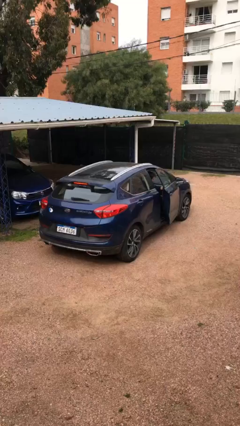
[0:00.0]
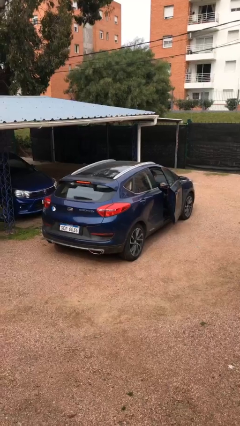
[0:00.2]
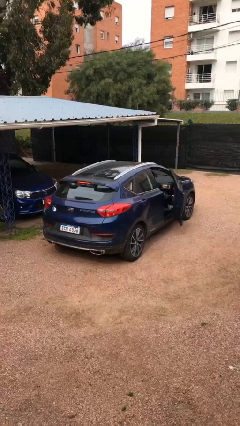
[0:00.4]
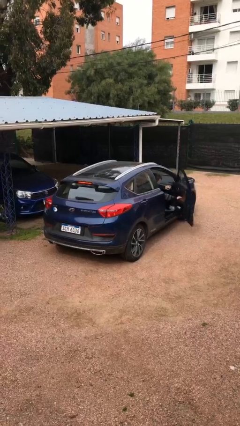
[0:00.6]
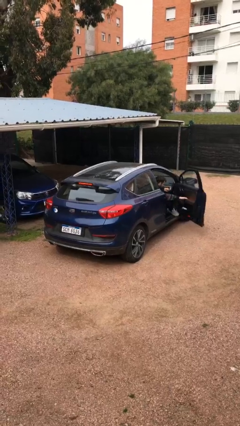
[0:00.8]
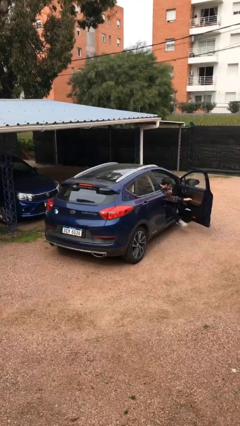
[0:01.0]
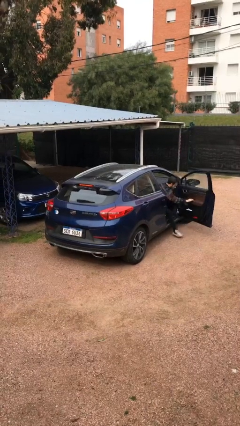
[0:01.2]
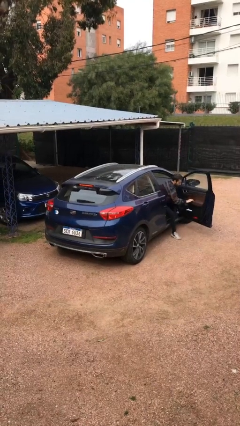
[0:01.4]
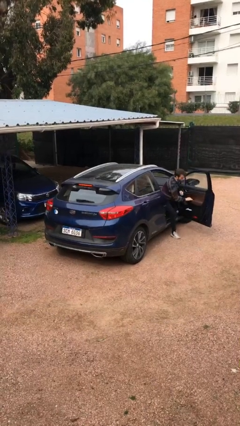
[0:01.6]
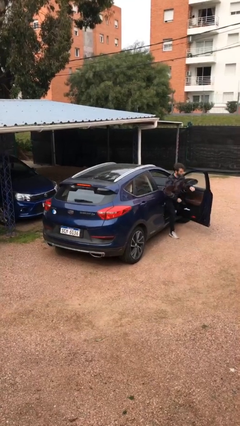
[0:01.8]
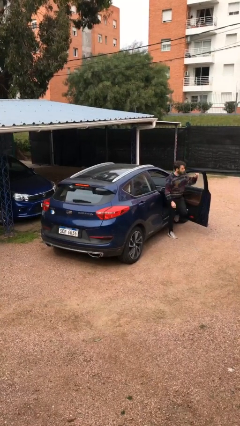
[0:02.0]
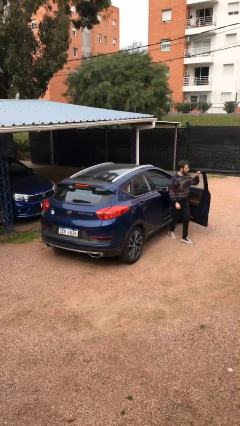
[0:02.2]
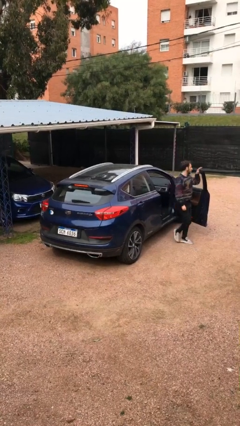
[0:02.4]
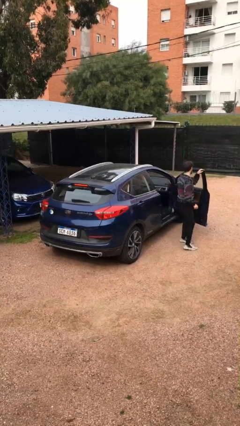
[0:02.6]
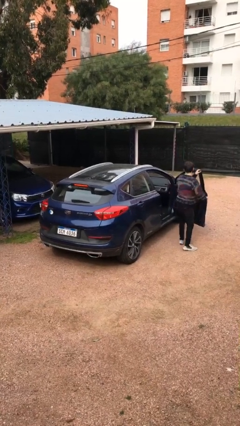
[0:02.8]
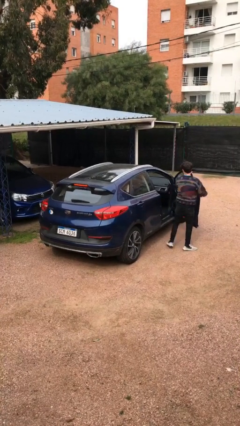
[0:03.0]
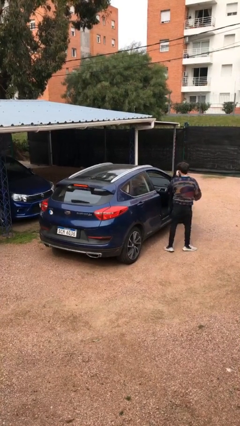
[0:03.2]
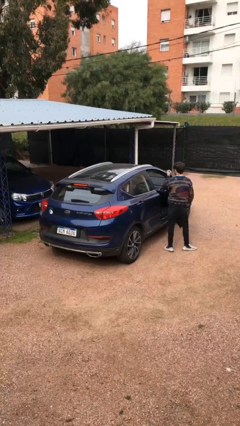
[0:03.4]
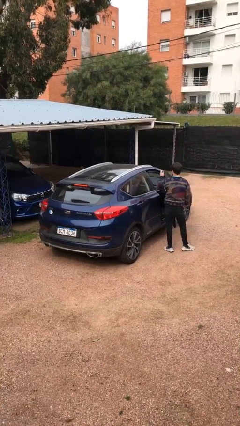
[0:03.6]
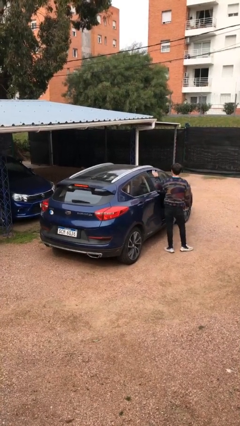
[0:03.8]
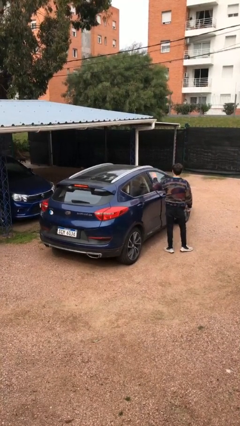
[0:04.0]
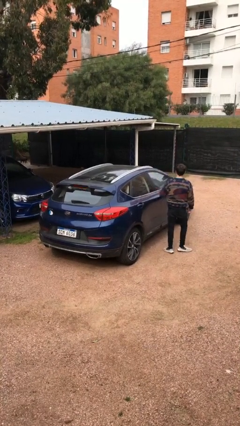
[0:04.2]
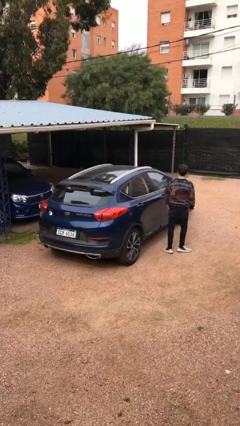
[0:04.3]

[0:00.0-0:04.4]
car drops off person

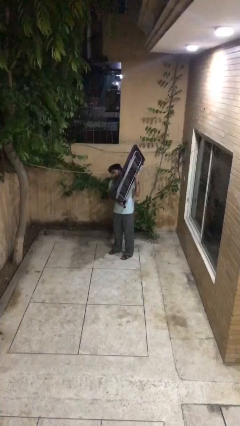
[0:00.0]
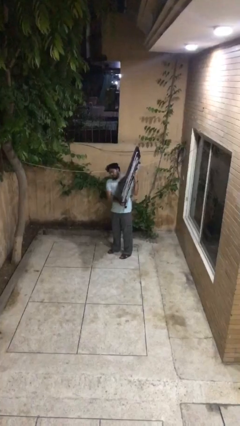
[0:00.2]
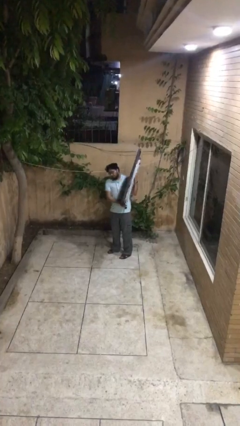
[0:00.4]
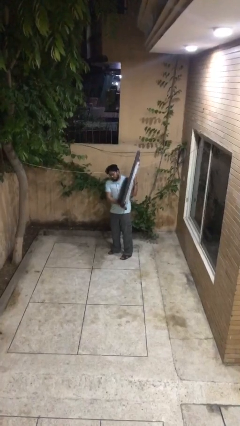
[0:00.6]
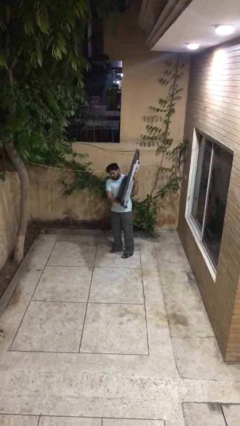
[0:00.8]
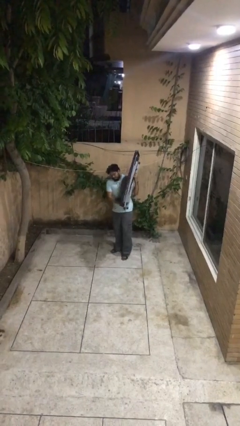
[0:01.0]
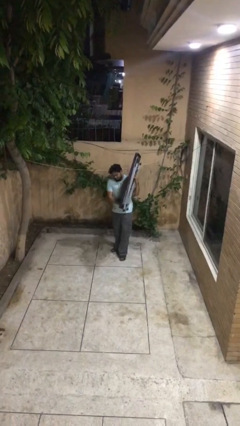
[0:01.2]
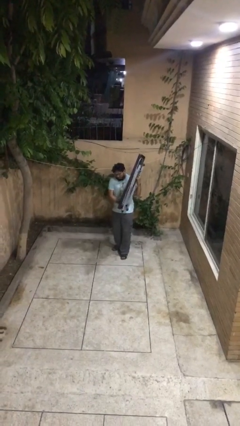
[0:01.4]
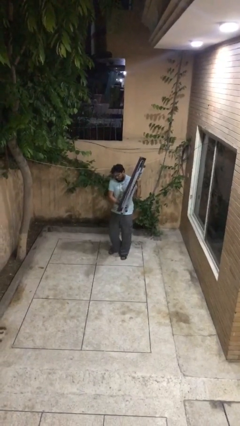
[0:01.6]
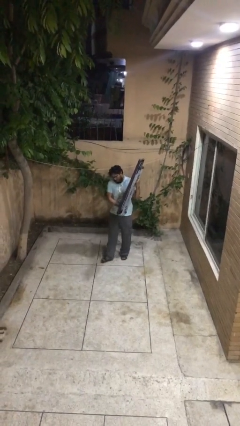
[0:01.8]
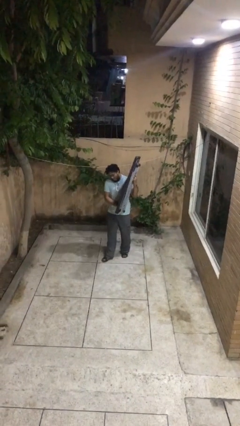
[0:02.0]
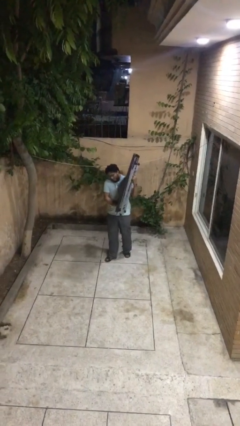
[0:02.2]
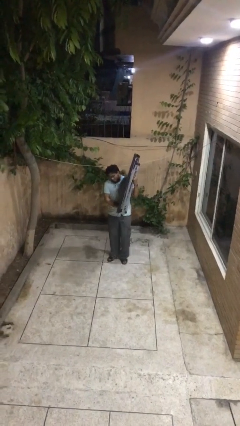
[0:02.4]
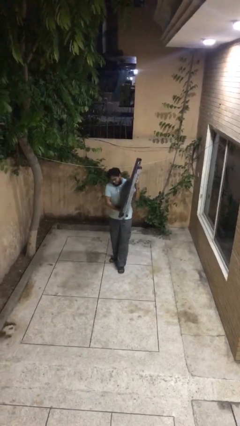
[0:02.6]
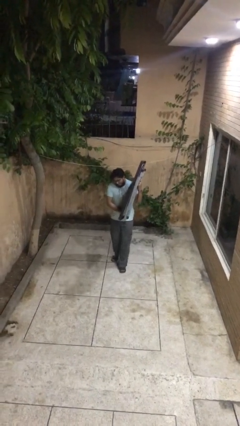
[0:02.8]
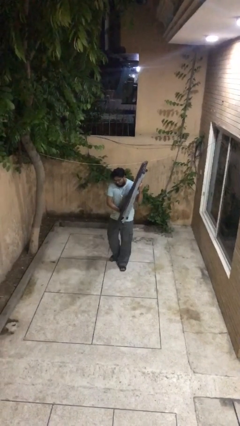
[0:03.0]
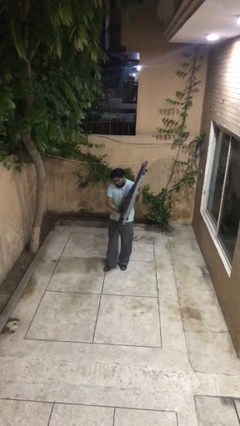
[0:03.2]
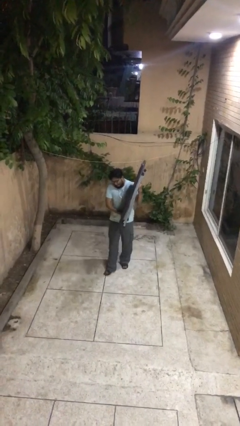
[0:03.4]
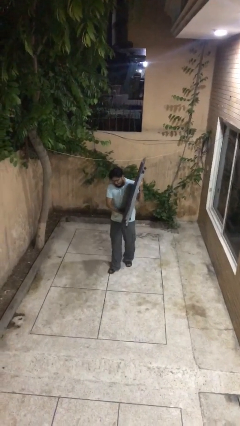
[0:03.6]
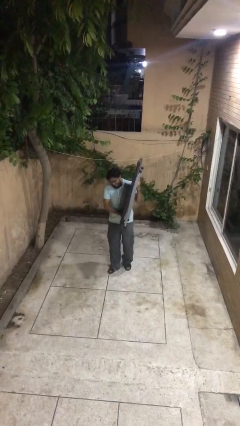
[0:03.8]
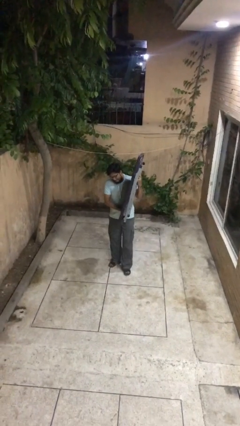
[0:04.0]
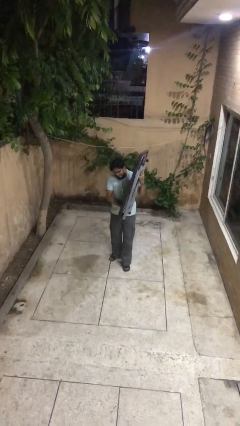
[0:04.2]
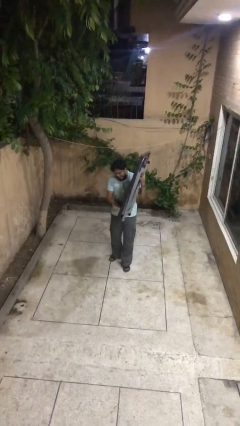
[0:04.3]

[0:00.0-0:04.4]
person carries heavy object

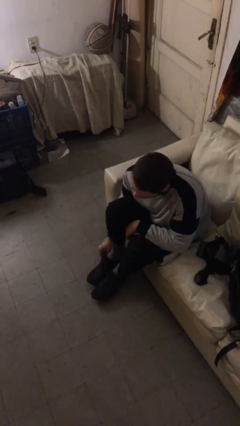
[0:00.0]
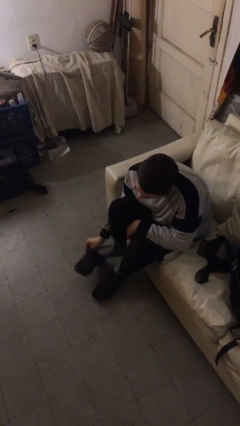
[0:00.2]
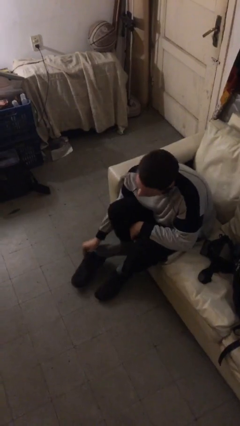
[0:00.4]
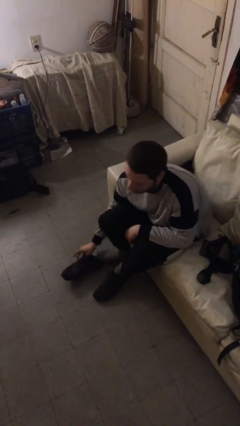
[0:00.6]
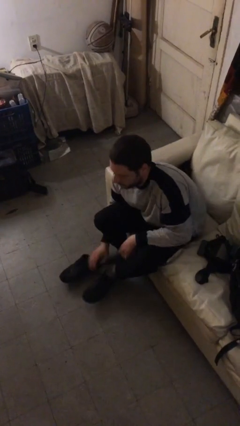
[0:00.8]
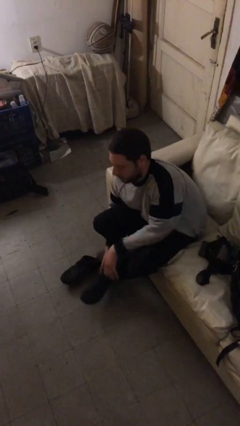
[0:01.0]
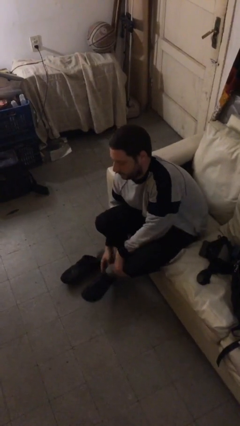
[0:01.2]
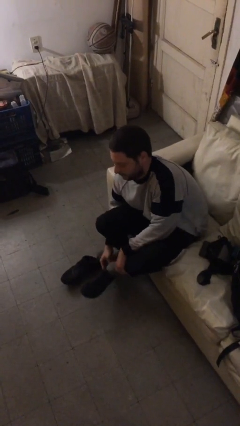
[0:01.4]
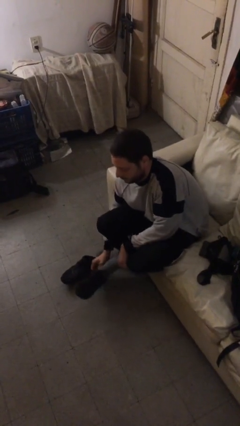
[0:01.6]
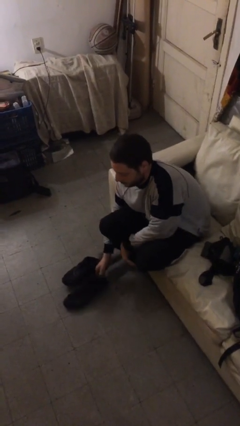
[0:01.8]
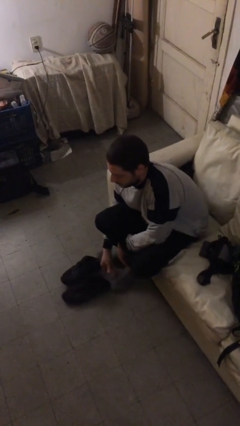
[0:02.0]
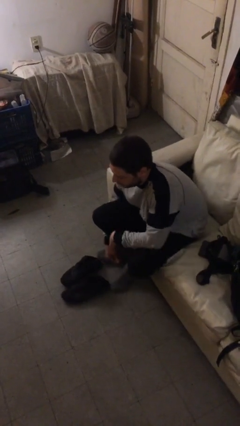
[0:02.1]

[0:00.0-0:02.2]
person takes off shoes

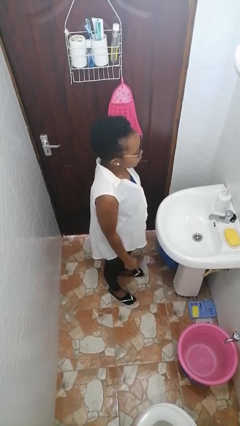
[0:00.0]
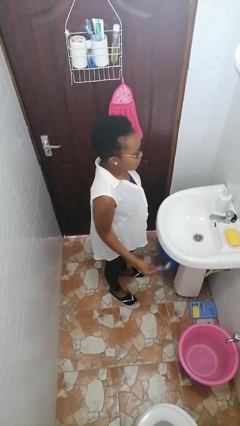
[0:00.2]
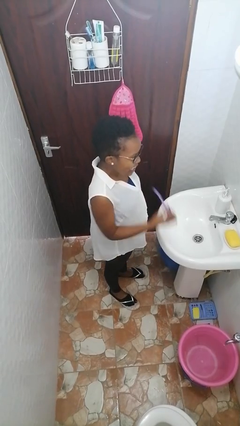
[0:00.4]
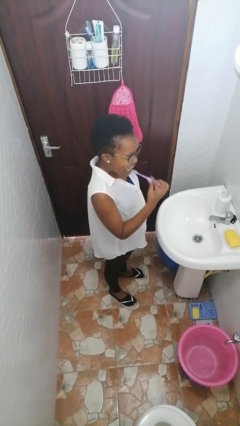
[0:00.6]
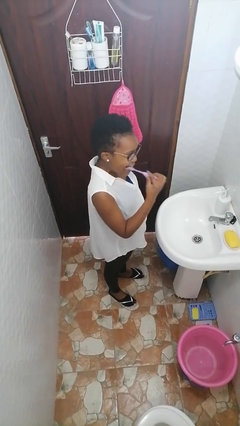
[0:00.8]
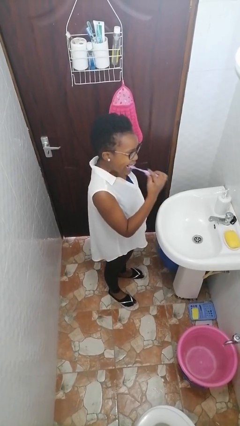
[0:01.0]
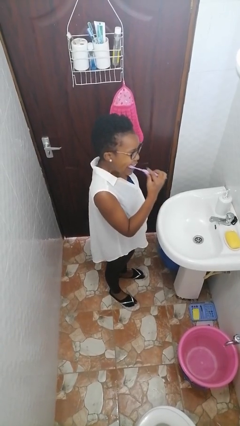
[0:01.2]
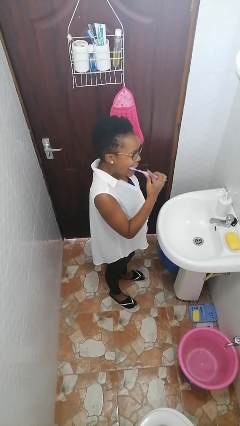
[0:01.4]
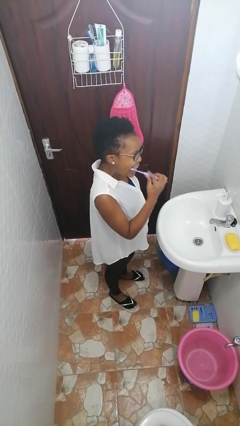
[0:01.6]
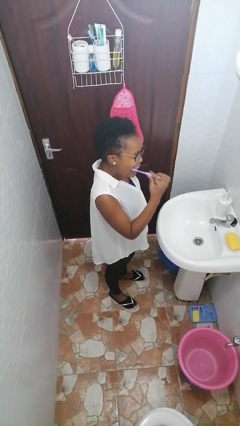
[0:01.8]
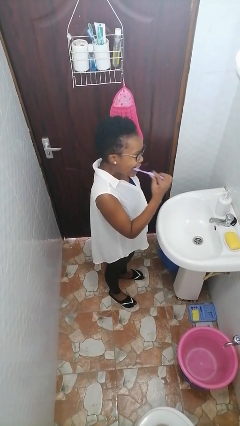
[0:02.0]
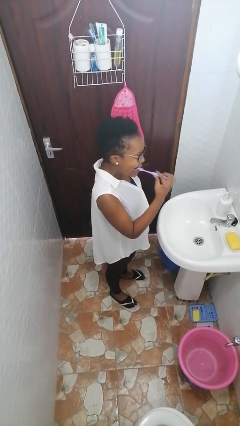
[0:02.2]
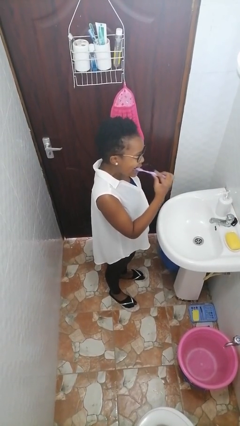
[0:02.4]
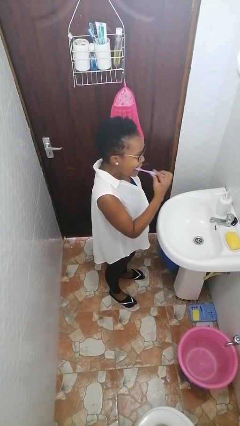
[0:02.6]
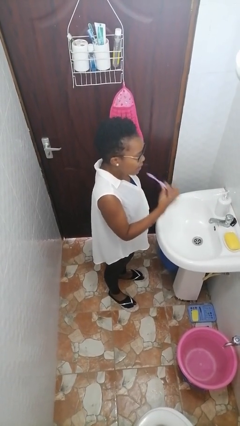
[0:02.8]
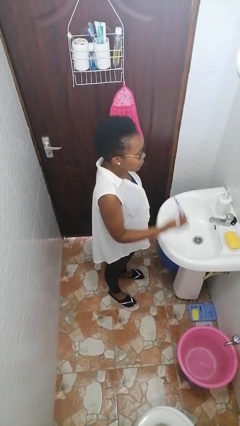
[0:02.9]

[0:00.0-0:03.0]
person brushes teeth

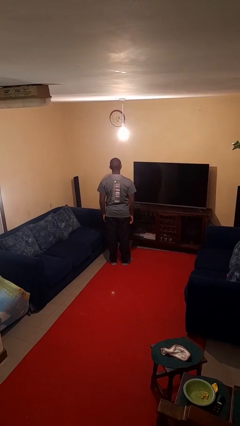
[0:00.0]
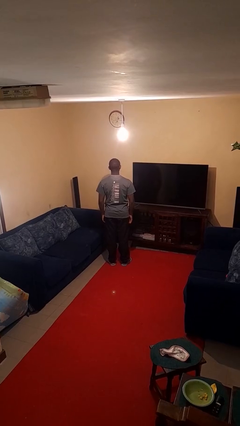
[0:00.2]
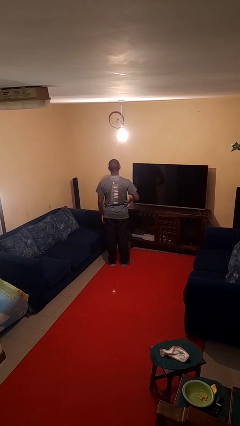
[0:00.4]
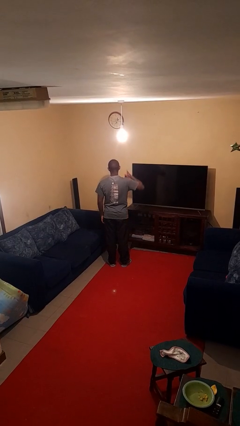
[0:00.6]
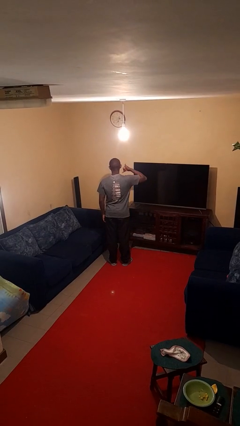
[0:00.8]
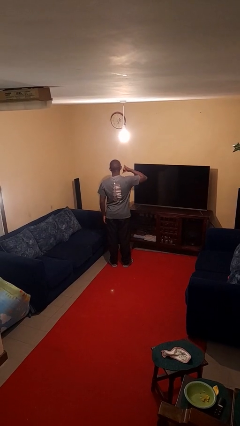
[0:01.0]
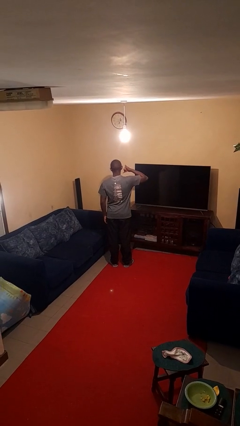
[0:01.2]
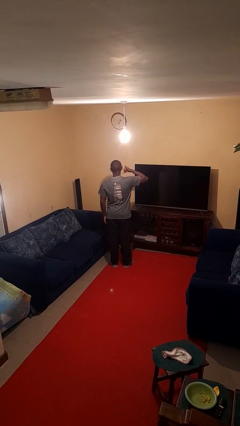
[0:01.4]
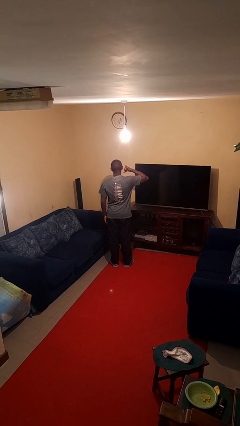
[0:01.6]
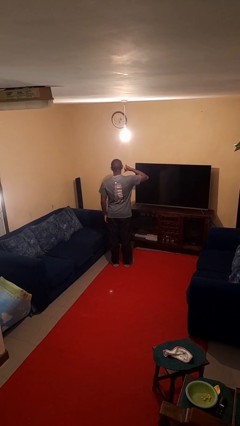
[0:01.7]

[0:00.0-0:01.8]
person gestures call me

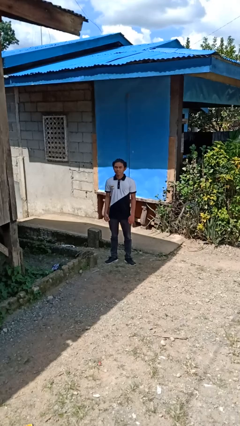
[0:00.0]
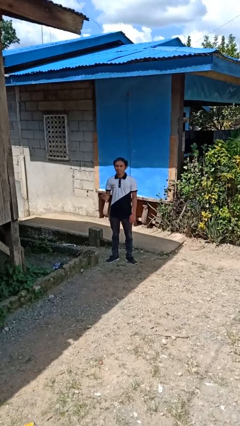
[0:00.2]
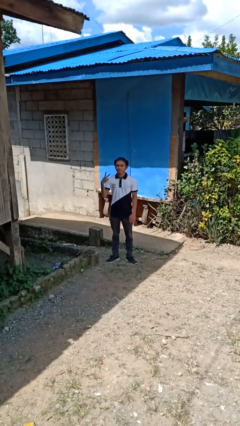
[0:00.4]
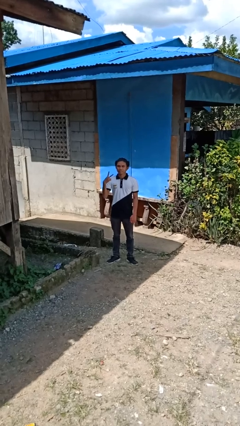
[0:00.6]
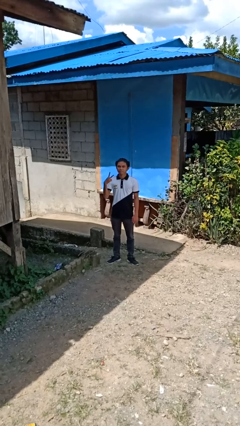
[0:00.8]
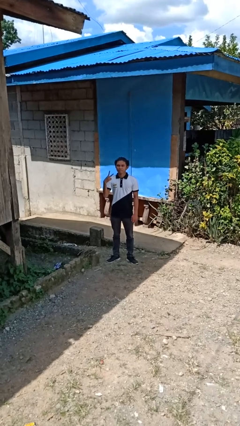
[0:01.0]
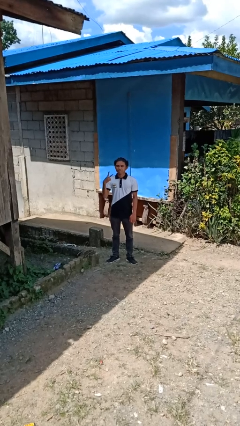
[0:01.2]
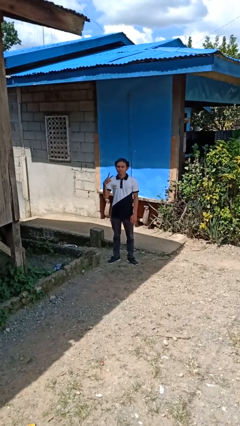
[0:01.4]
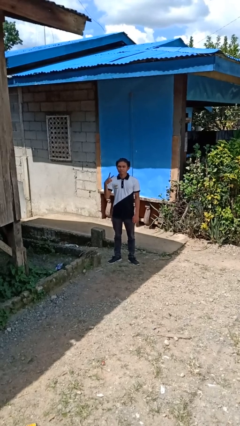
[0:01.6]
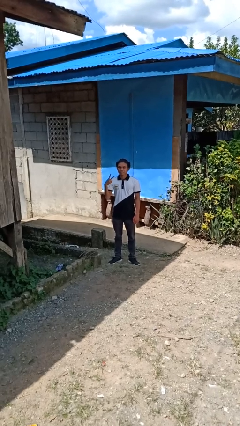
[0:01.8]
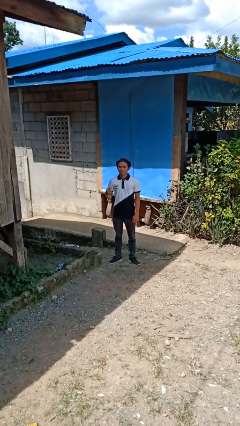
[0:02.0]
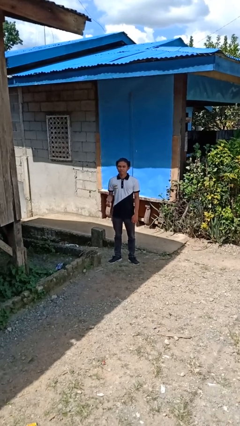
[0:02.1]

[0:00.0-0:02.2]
person gestures peace
